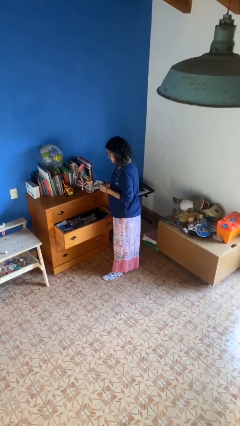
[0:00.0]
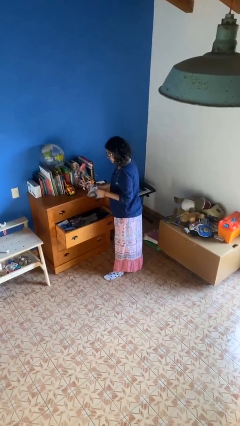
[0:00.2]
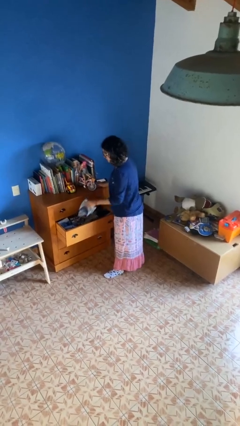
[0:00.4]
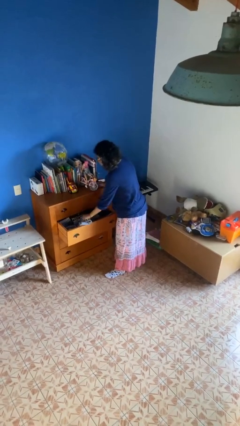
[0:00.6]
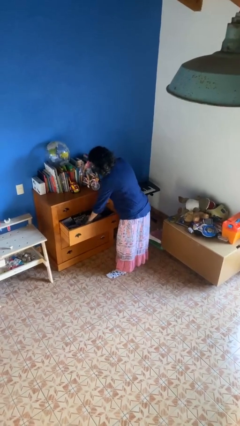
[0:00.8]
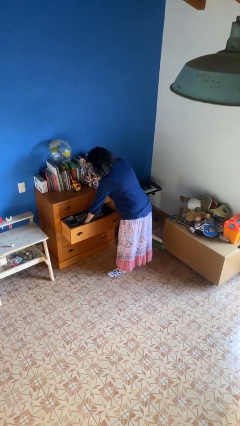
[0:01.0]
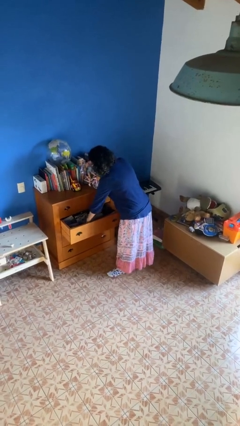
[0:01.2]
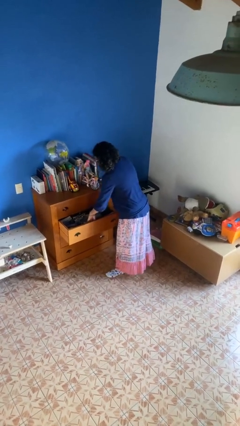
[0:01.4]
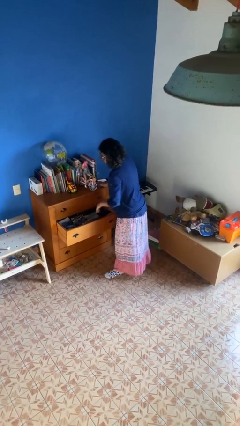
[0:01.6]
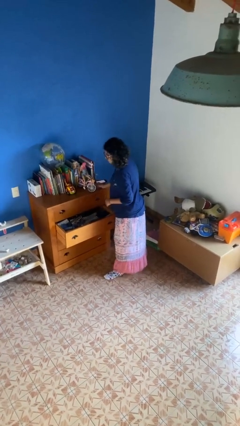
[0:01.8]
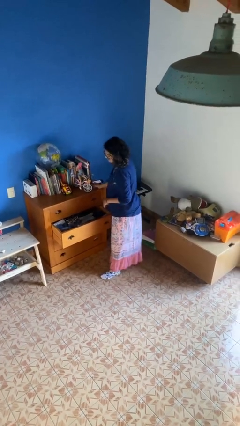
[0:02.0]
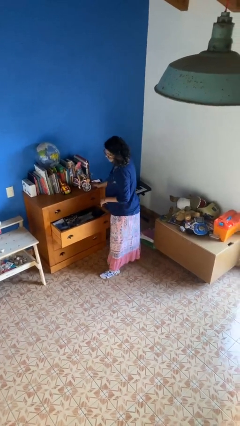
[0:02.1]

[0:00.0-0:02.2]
person puts clothes into dresser

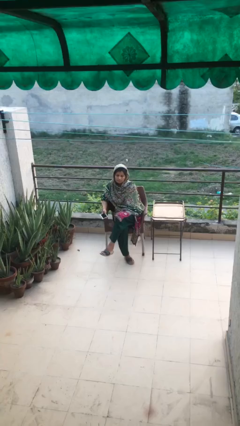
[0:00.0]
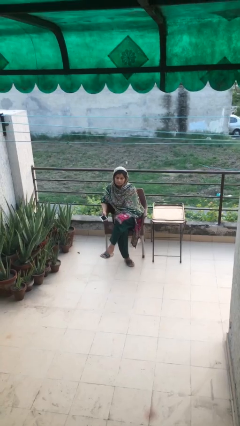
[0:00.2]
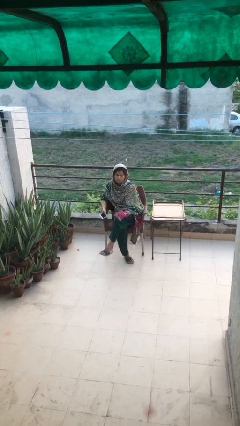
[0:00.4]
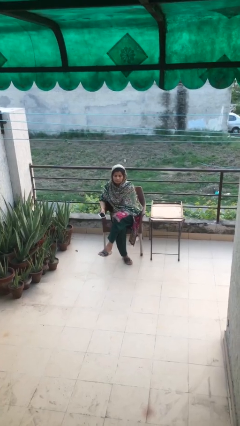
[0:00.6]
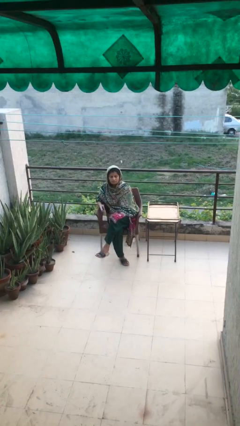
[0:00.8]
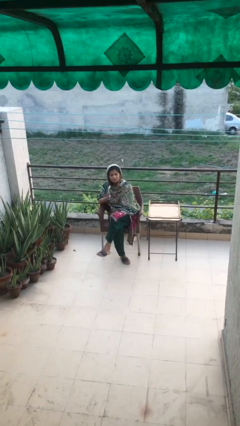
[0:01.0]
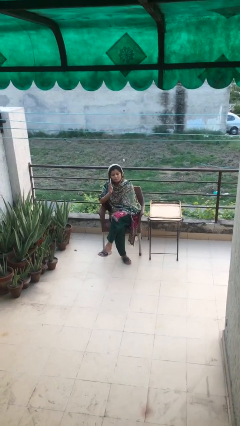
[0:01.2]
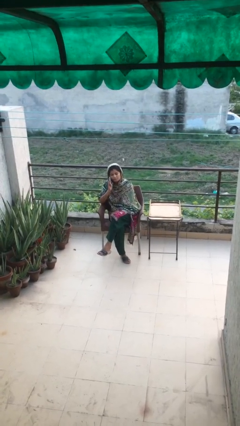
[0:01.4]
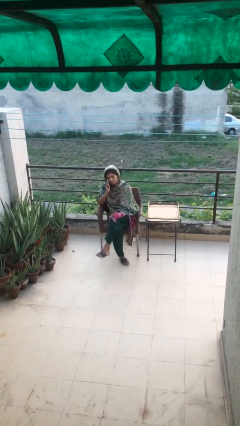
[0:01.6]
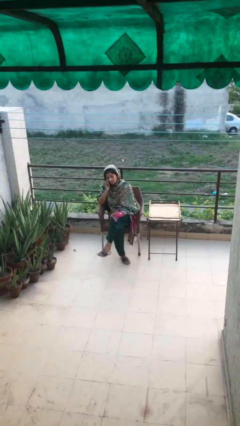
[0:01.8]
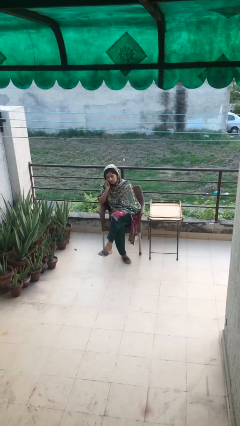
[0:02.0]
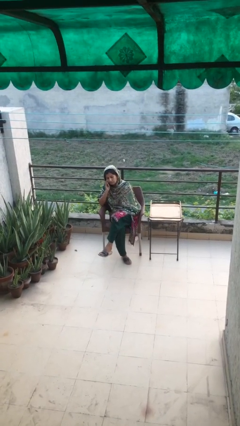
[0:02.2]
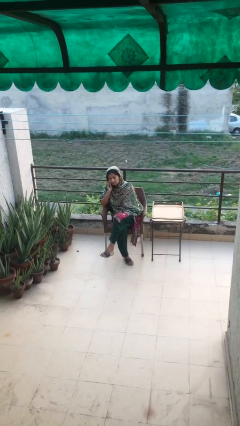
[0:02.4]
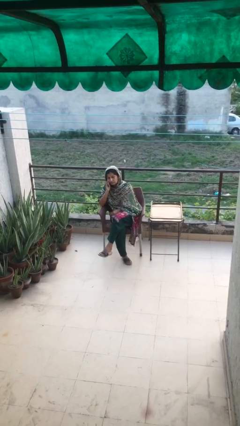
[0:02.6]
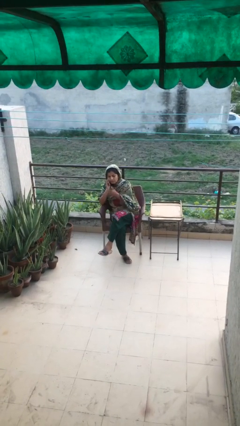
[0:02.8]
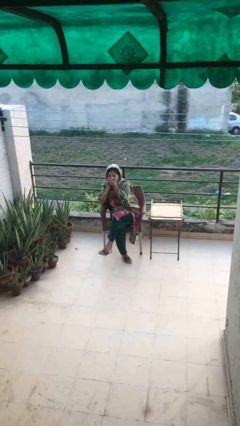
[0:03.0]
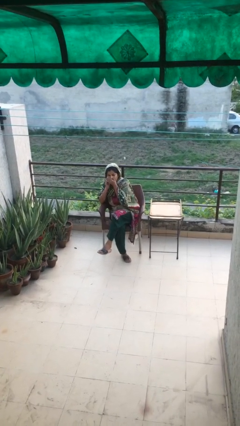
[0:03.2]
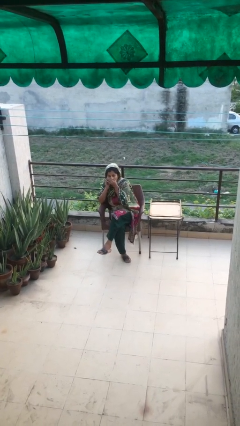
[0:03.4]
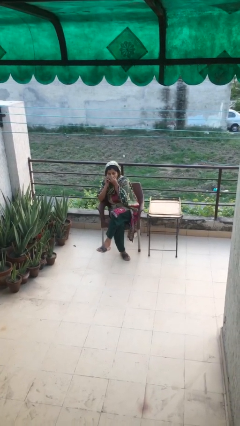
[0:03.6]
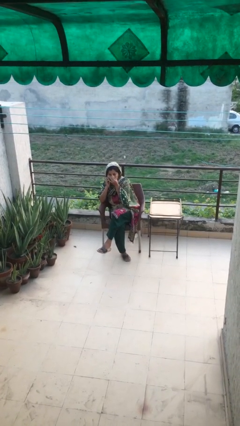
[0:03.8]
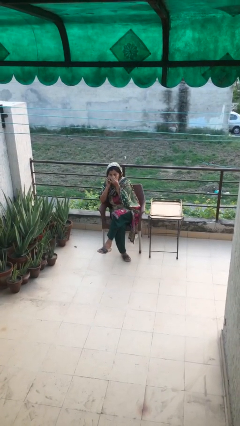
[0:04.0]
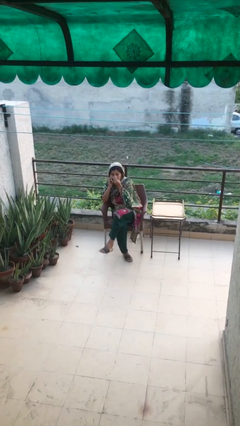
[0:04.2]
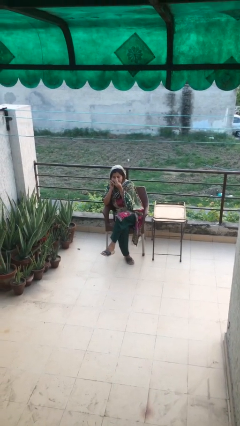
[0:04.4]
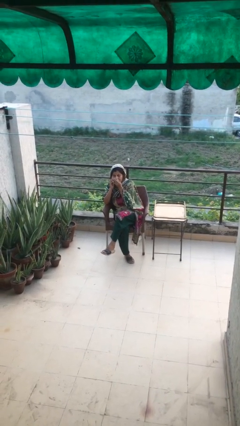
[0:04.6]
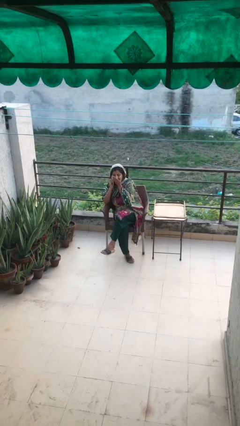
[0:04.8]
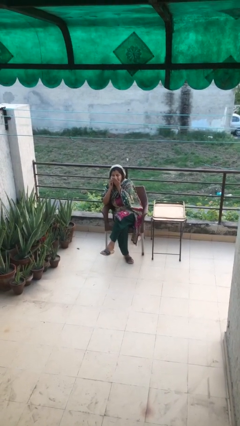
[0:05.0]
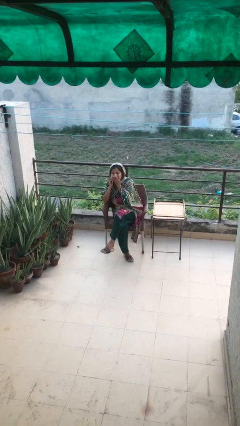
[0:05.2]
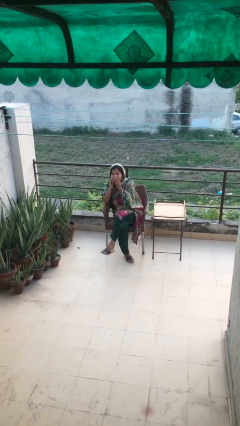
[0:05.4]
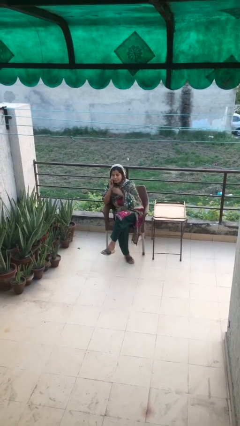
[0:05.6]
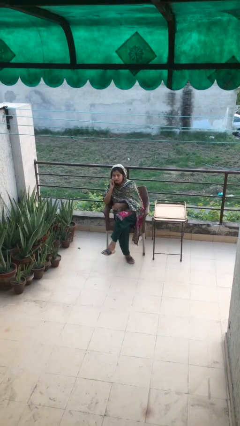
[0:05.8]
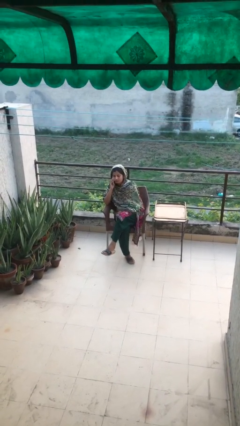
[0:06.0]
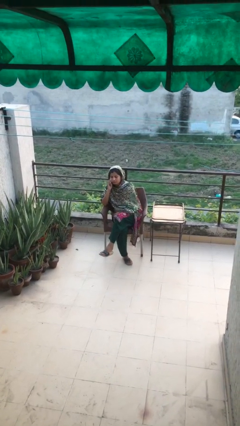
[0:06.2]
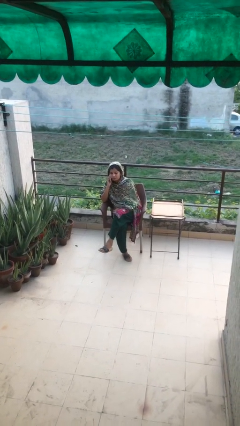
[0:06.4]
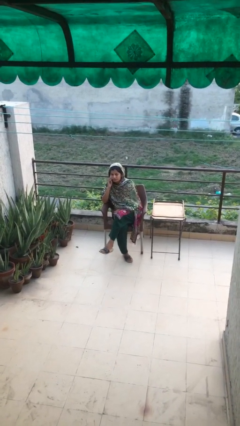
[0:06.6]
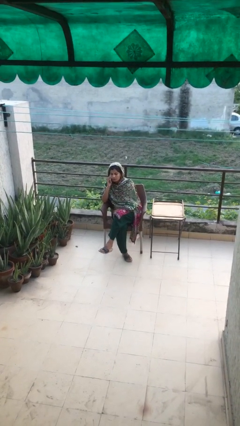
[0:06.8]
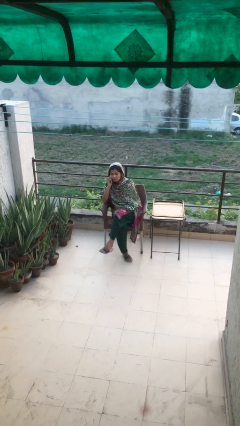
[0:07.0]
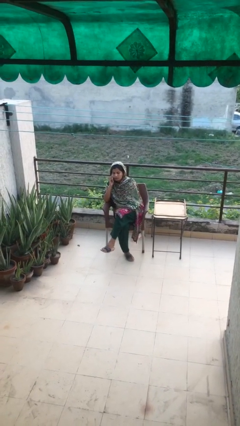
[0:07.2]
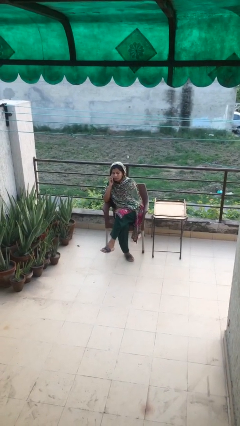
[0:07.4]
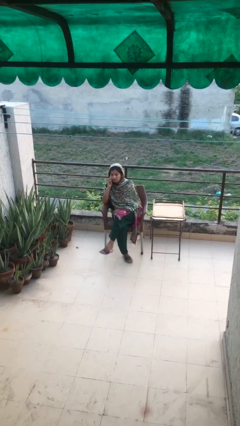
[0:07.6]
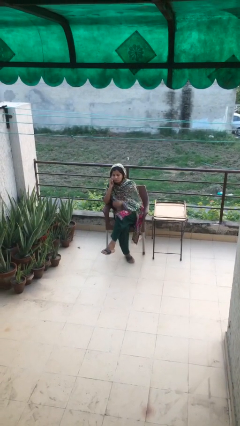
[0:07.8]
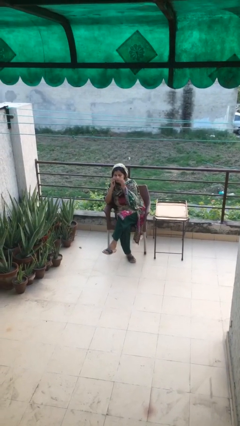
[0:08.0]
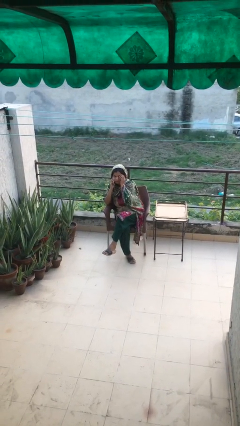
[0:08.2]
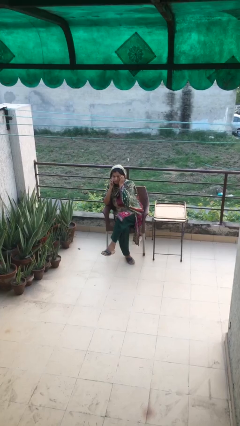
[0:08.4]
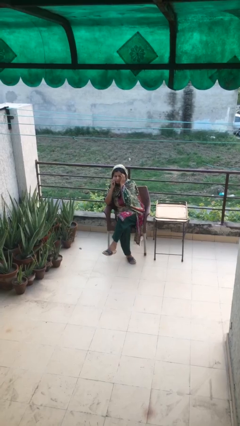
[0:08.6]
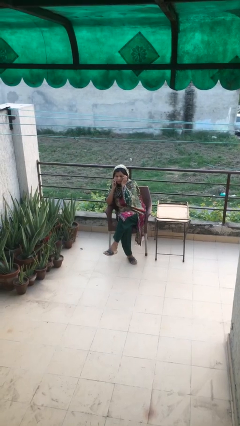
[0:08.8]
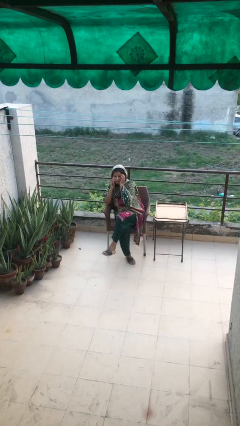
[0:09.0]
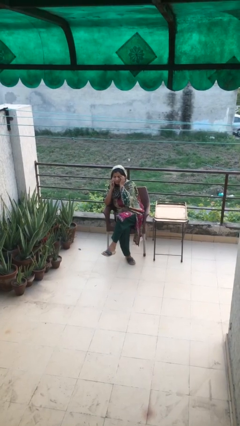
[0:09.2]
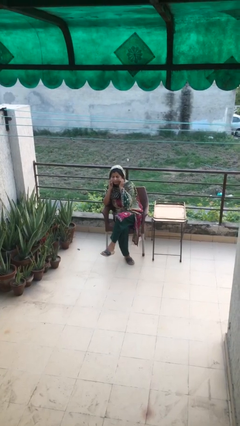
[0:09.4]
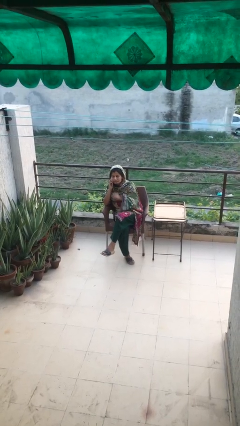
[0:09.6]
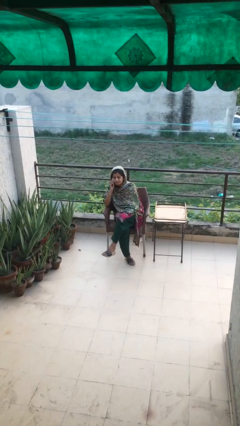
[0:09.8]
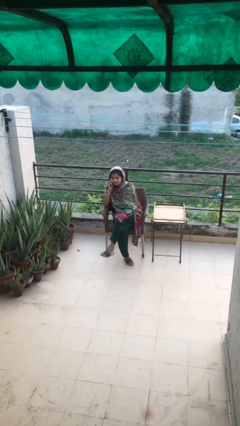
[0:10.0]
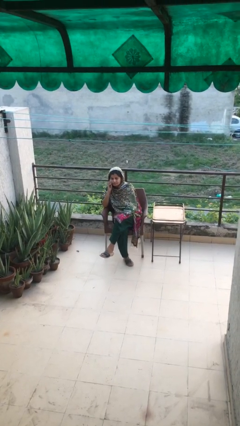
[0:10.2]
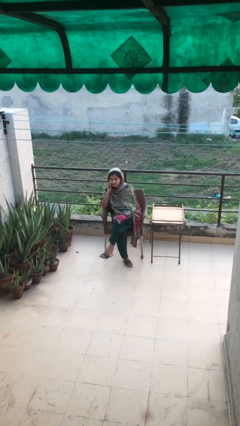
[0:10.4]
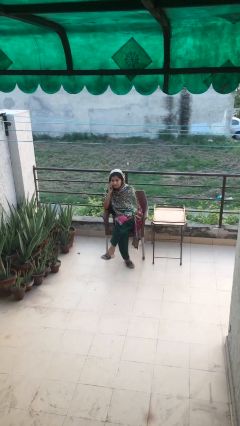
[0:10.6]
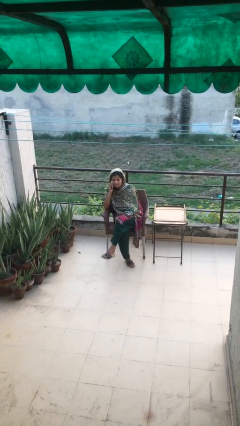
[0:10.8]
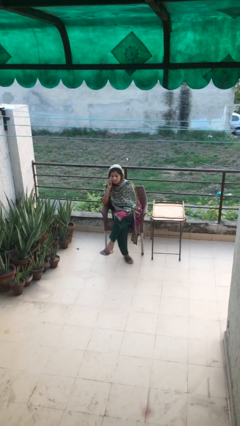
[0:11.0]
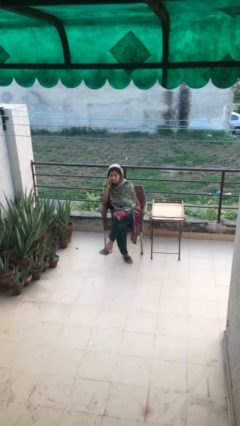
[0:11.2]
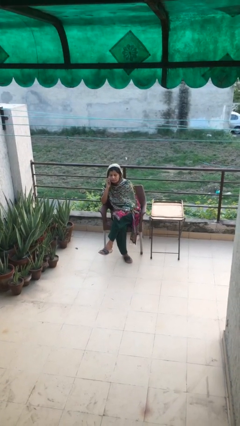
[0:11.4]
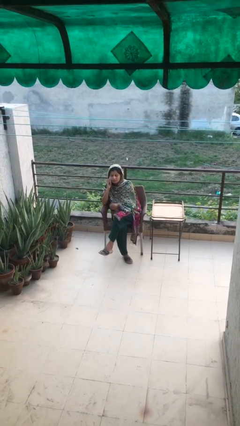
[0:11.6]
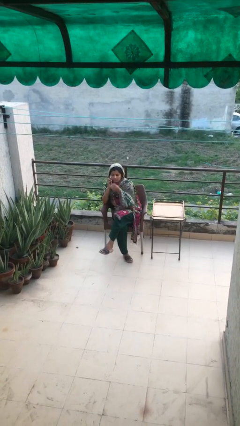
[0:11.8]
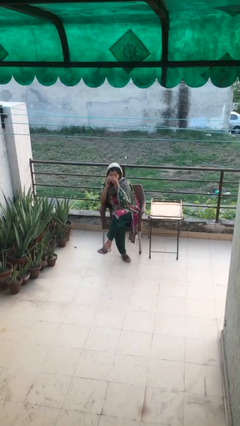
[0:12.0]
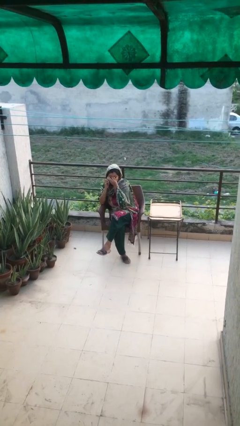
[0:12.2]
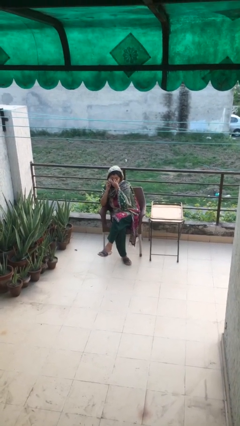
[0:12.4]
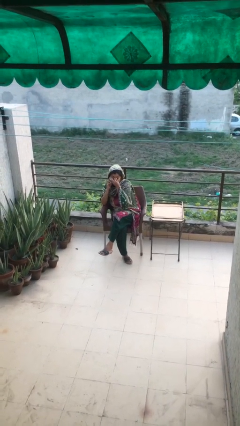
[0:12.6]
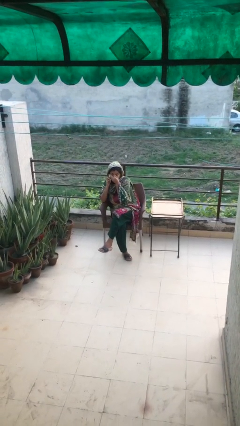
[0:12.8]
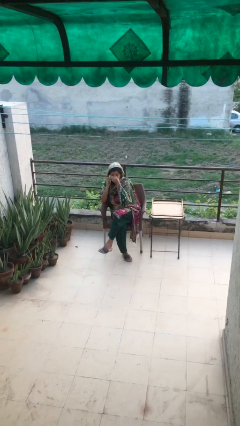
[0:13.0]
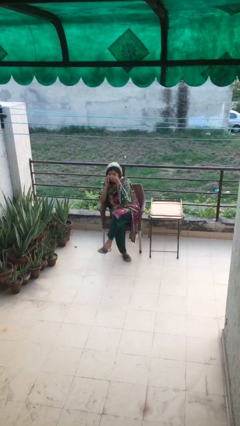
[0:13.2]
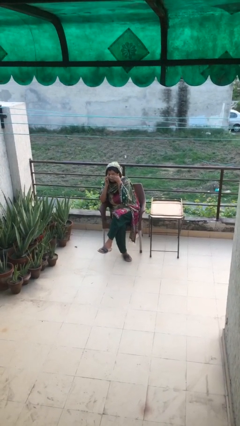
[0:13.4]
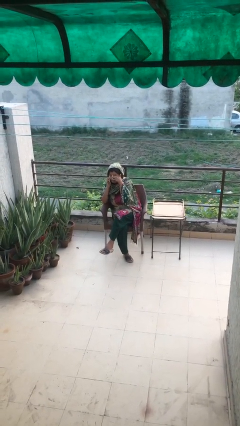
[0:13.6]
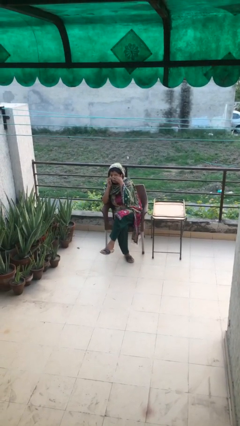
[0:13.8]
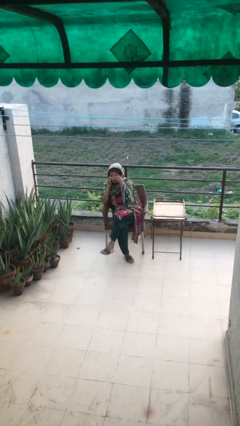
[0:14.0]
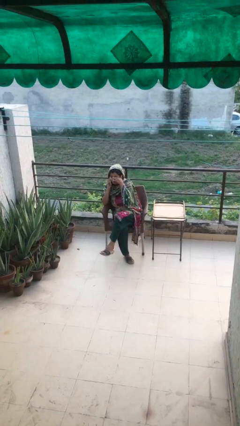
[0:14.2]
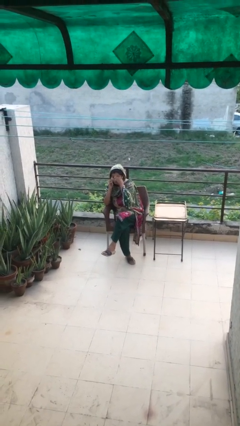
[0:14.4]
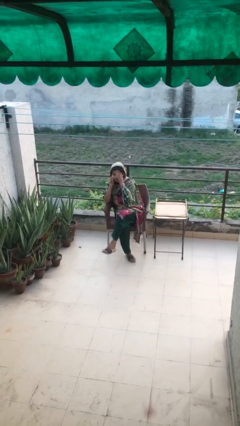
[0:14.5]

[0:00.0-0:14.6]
person talks on phone

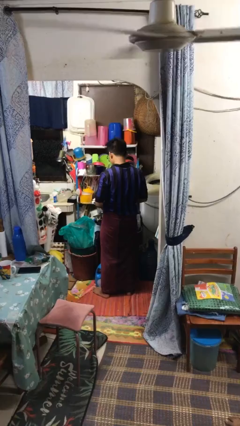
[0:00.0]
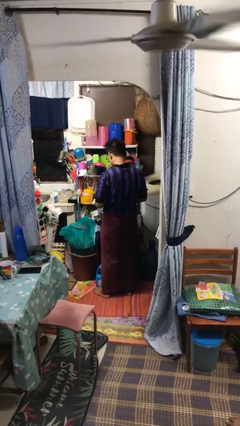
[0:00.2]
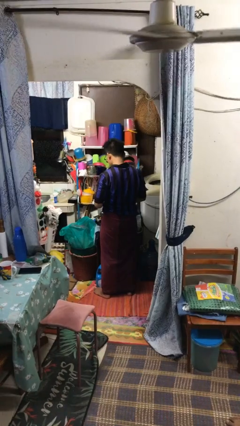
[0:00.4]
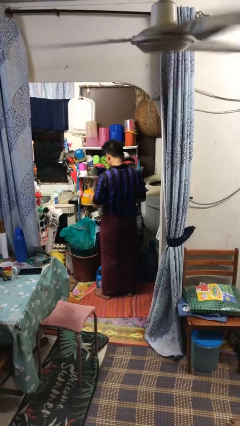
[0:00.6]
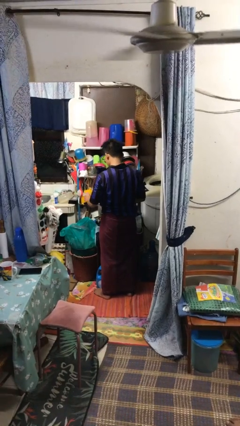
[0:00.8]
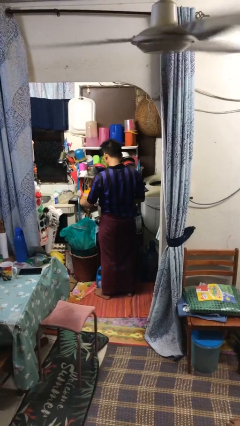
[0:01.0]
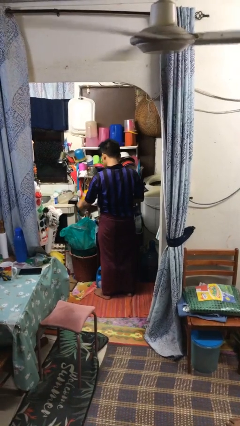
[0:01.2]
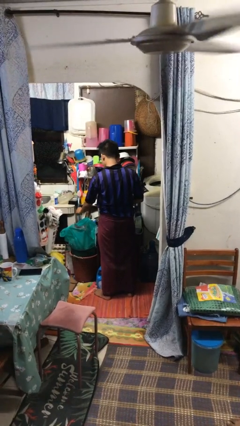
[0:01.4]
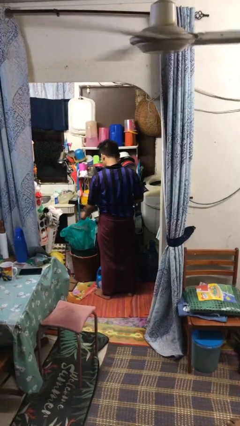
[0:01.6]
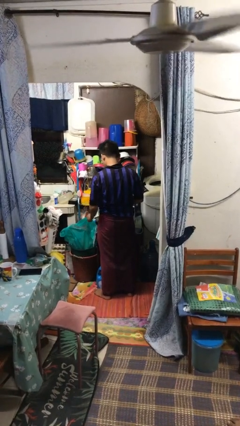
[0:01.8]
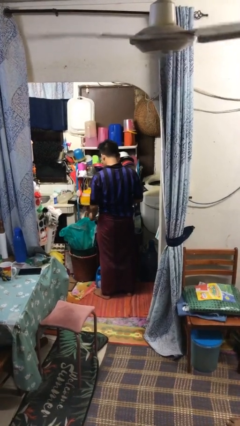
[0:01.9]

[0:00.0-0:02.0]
person discards trash
